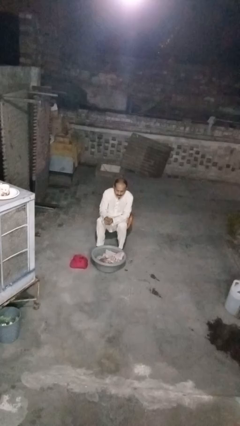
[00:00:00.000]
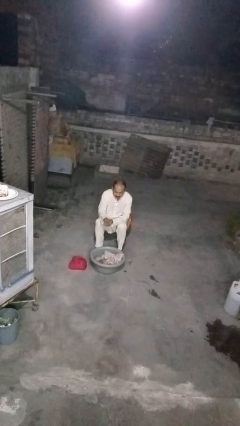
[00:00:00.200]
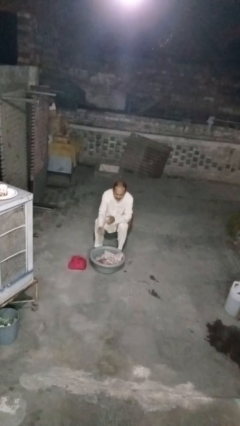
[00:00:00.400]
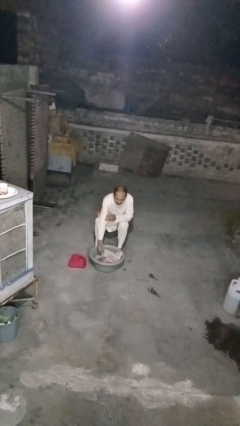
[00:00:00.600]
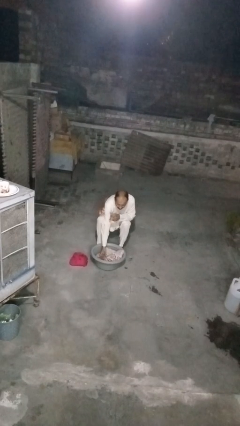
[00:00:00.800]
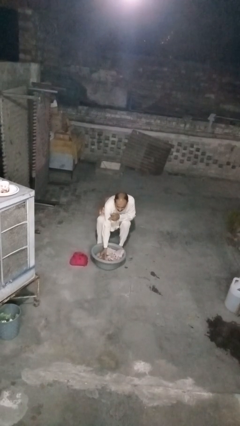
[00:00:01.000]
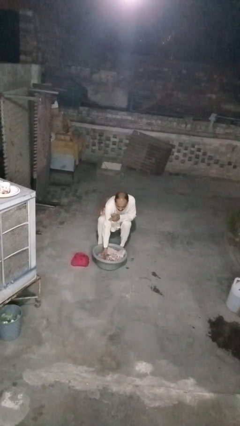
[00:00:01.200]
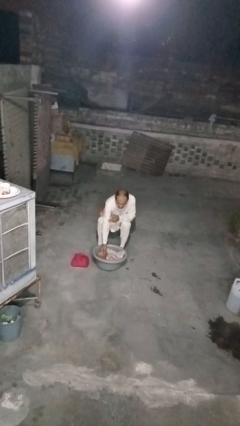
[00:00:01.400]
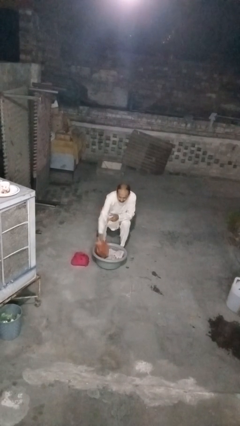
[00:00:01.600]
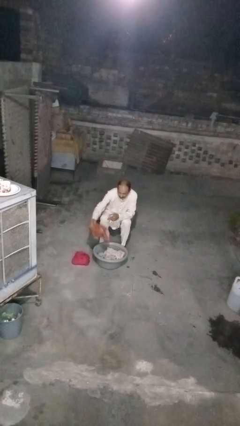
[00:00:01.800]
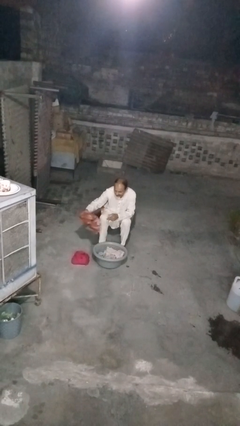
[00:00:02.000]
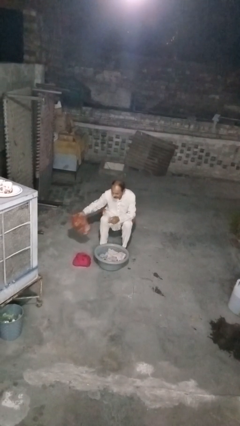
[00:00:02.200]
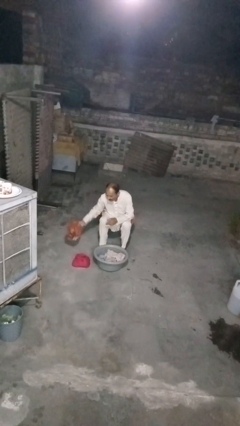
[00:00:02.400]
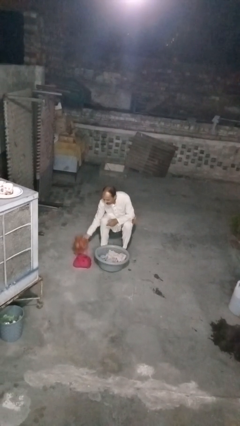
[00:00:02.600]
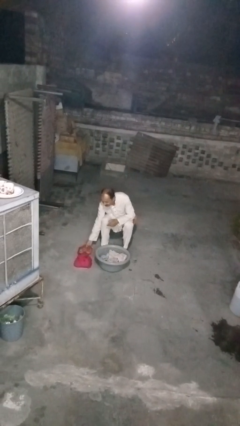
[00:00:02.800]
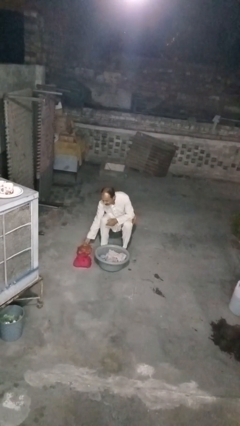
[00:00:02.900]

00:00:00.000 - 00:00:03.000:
person takes object from basket

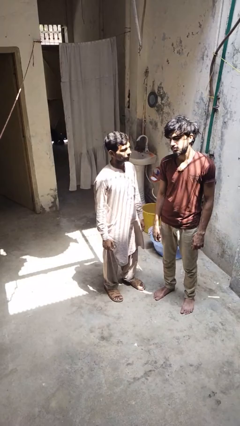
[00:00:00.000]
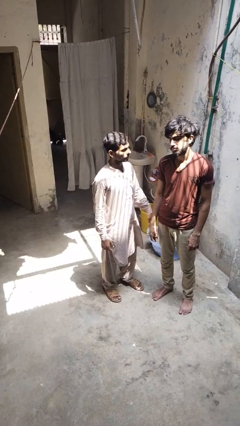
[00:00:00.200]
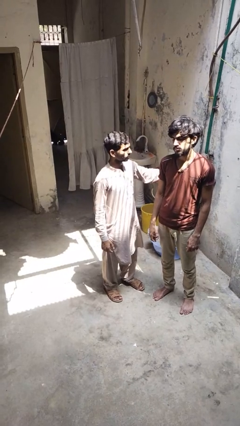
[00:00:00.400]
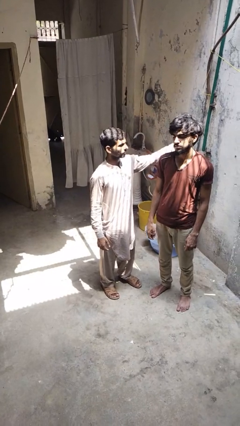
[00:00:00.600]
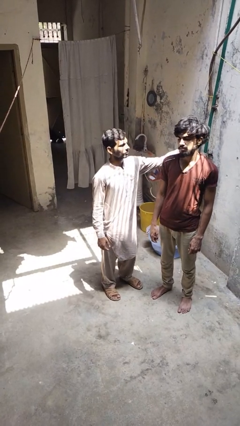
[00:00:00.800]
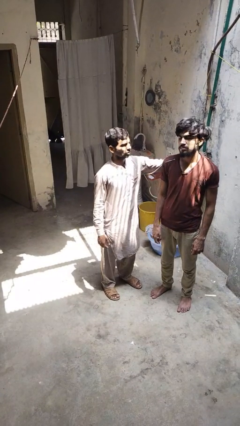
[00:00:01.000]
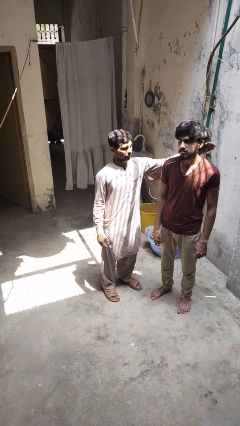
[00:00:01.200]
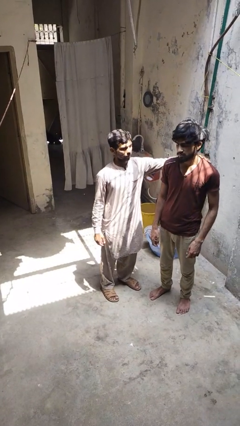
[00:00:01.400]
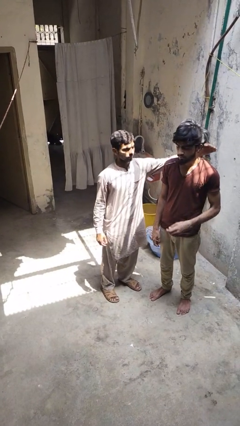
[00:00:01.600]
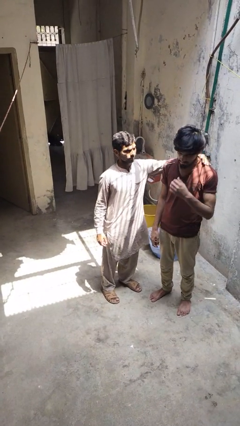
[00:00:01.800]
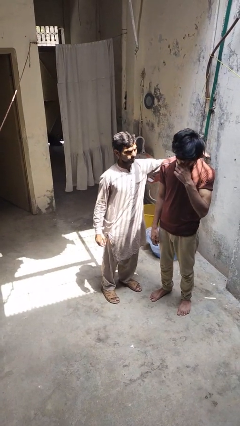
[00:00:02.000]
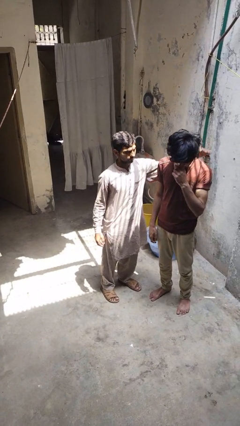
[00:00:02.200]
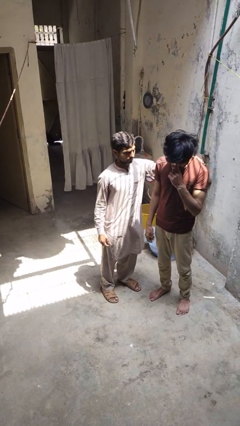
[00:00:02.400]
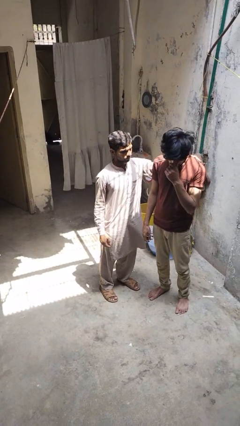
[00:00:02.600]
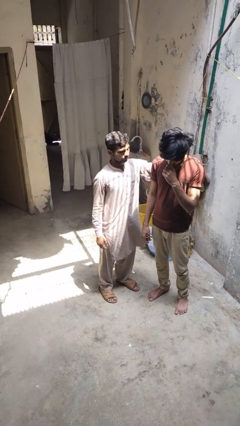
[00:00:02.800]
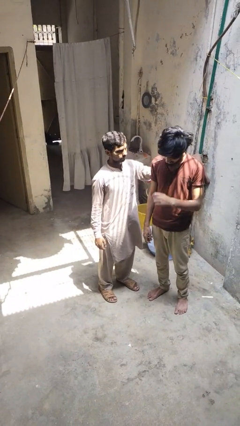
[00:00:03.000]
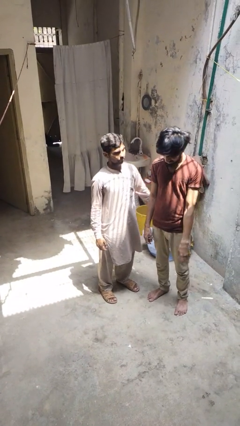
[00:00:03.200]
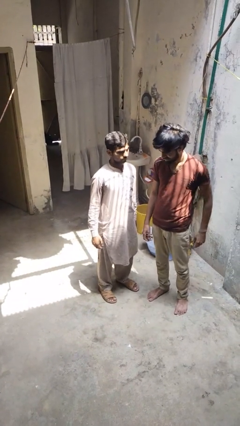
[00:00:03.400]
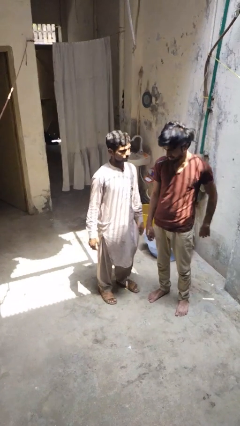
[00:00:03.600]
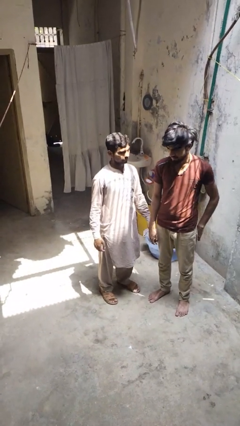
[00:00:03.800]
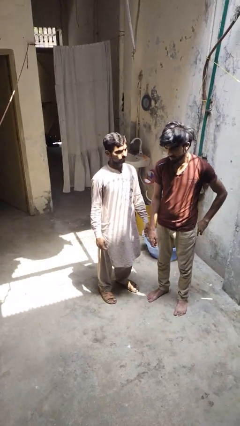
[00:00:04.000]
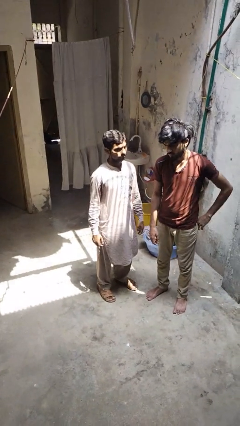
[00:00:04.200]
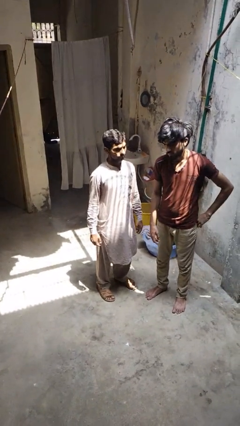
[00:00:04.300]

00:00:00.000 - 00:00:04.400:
person pounds shoulders of person

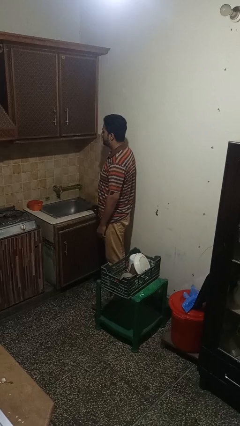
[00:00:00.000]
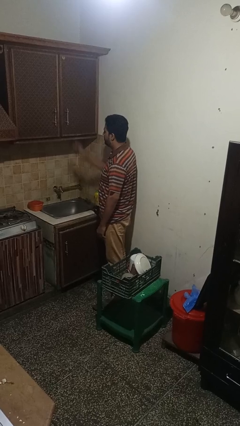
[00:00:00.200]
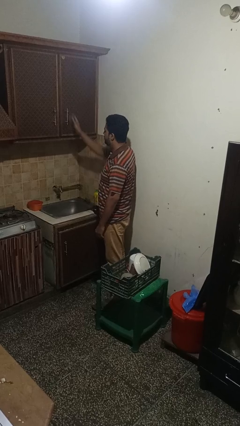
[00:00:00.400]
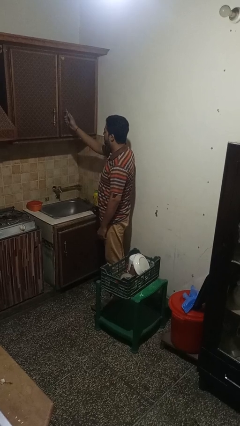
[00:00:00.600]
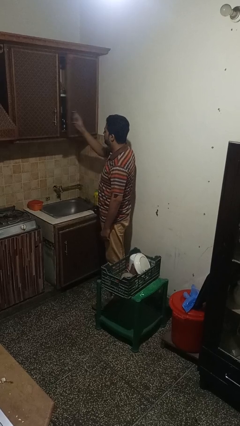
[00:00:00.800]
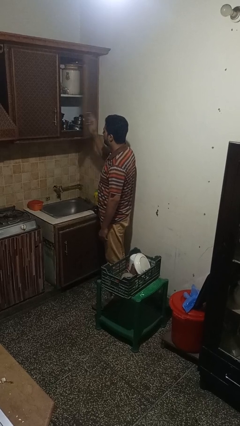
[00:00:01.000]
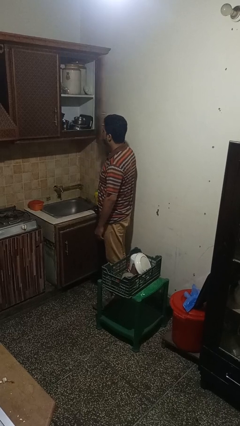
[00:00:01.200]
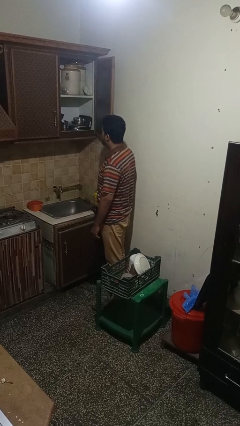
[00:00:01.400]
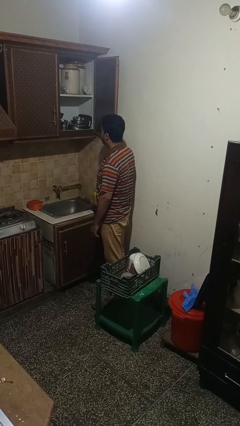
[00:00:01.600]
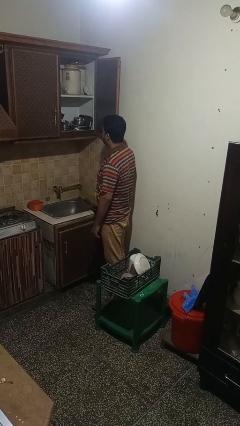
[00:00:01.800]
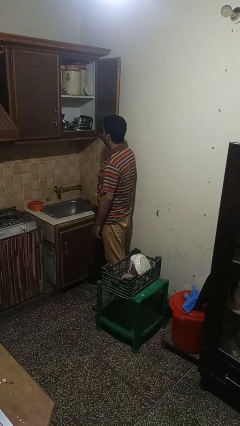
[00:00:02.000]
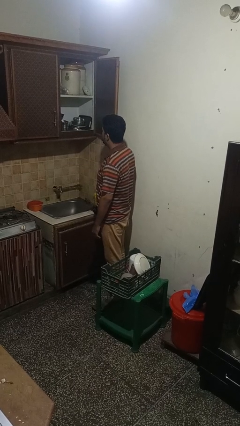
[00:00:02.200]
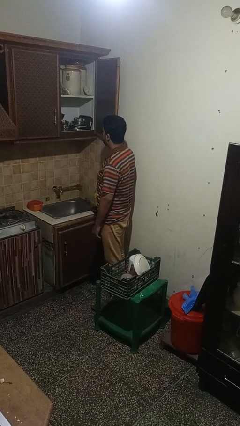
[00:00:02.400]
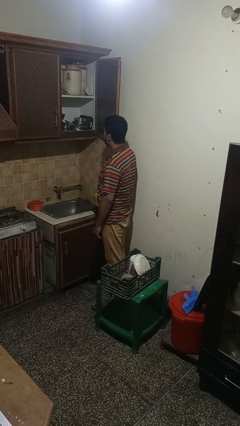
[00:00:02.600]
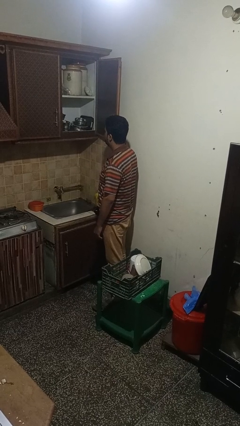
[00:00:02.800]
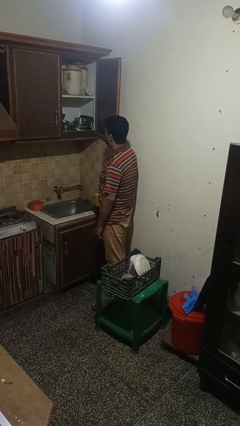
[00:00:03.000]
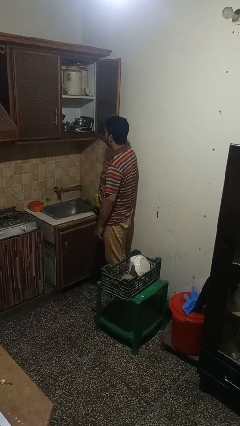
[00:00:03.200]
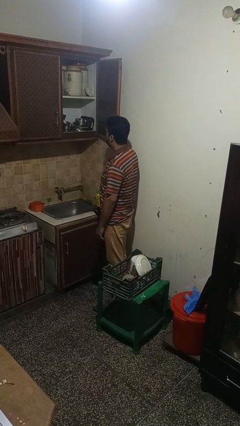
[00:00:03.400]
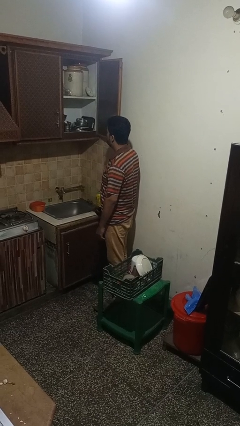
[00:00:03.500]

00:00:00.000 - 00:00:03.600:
person opens cabinet

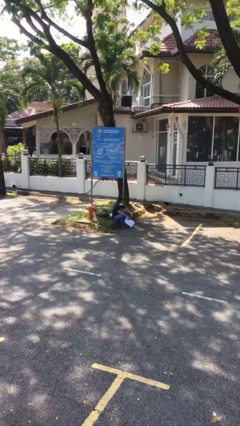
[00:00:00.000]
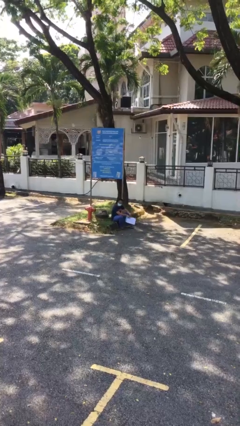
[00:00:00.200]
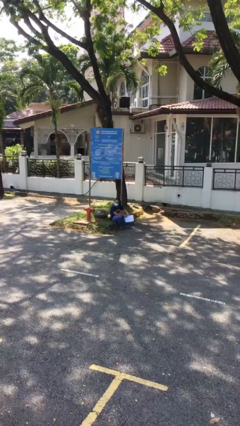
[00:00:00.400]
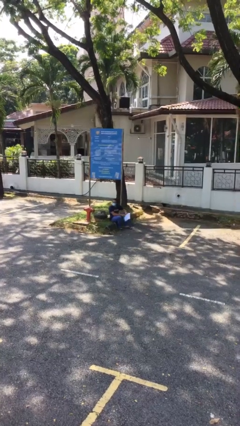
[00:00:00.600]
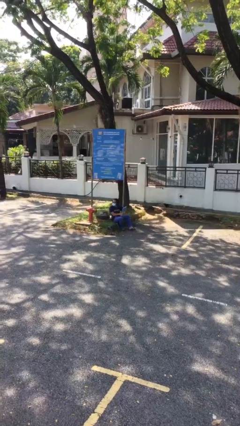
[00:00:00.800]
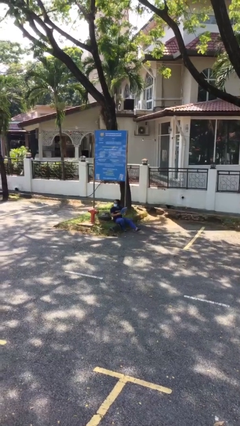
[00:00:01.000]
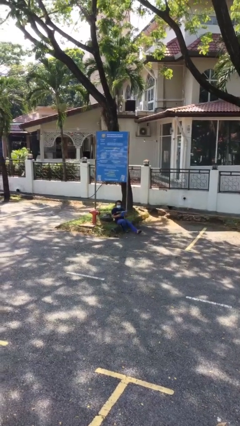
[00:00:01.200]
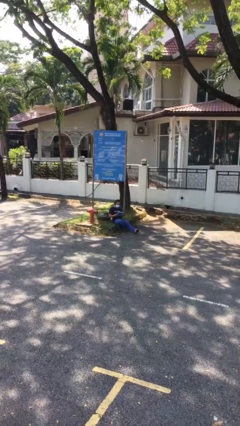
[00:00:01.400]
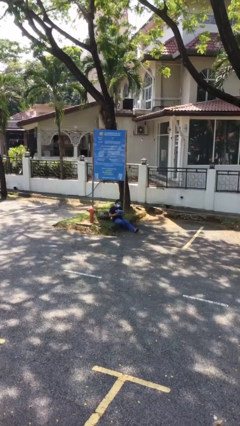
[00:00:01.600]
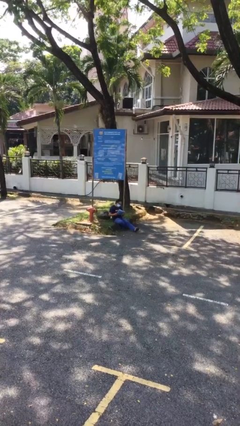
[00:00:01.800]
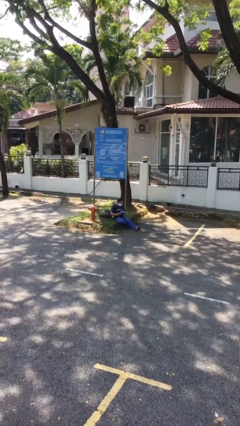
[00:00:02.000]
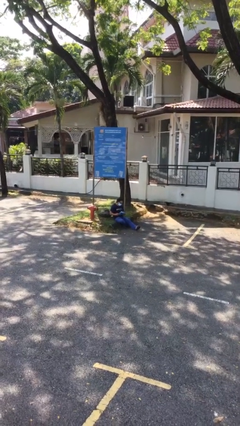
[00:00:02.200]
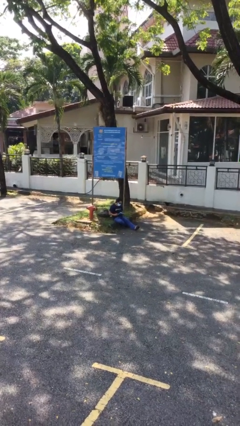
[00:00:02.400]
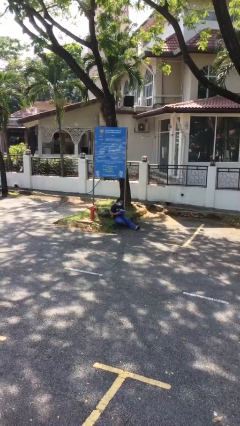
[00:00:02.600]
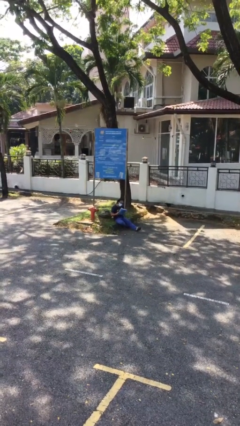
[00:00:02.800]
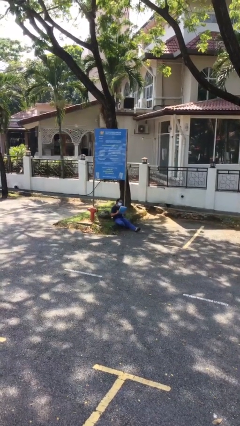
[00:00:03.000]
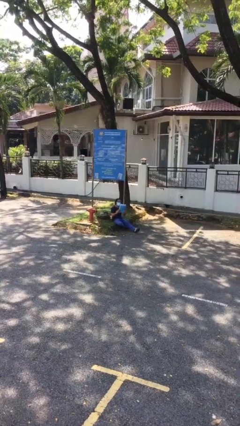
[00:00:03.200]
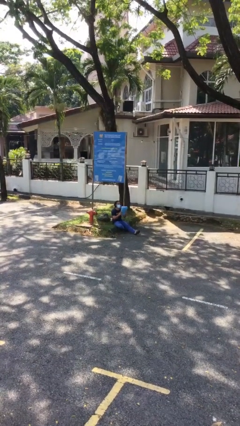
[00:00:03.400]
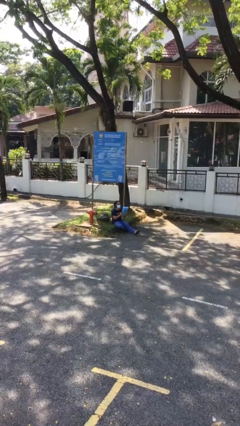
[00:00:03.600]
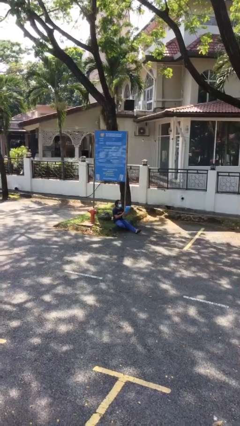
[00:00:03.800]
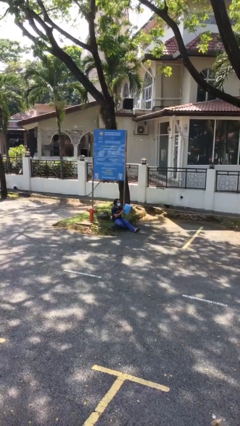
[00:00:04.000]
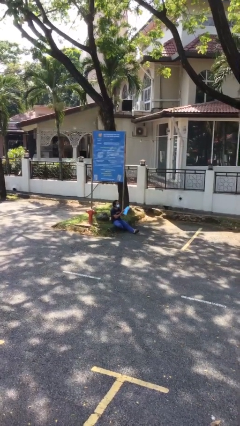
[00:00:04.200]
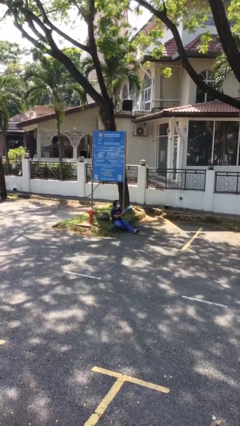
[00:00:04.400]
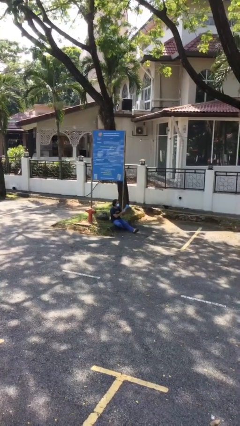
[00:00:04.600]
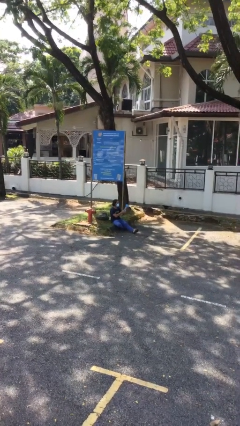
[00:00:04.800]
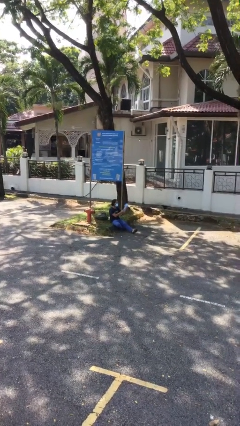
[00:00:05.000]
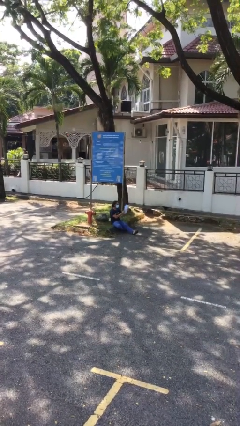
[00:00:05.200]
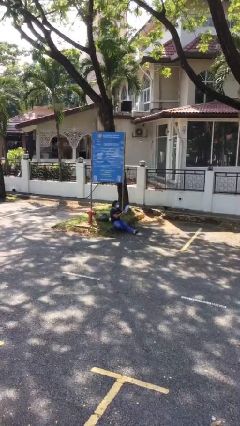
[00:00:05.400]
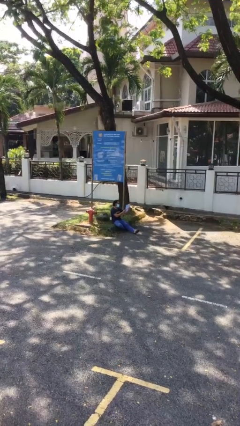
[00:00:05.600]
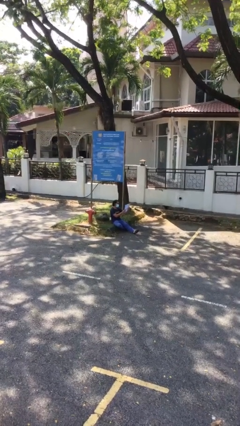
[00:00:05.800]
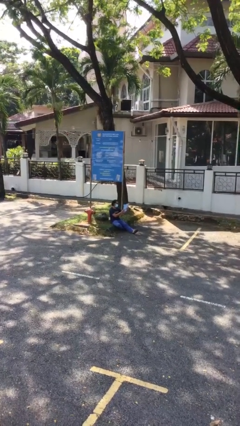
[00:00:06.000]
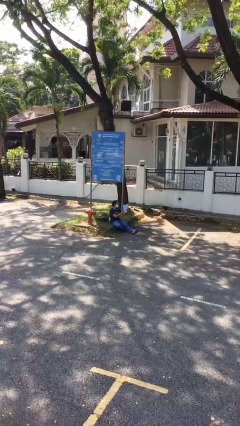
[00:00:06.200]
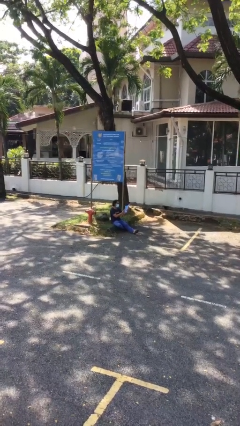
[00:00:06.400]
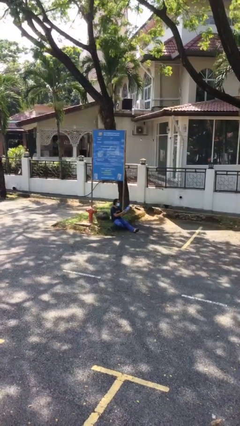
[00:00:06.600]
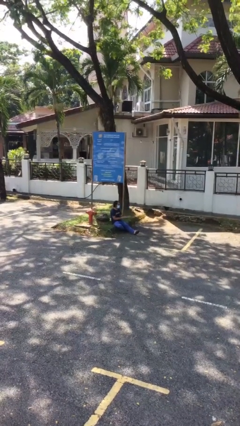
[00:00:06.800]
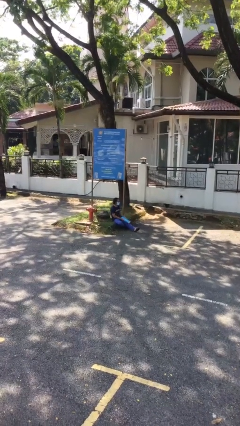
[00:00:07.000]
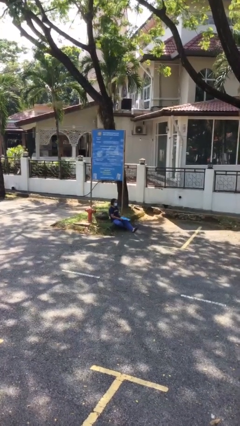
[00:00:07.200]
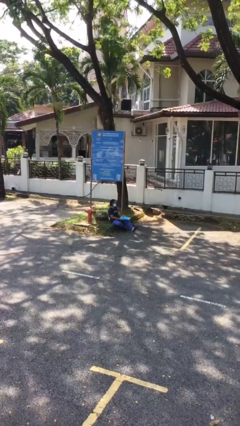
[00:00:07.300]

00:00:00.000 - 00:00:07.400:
person reads document
